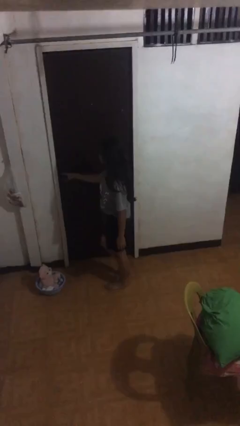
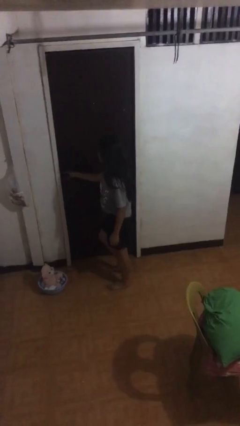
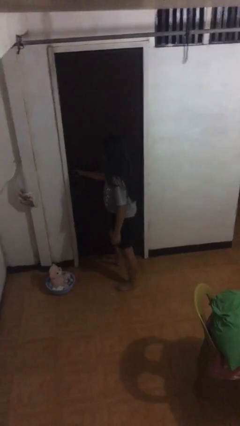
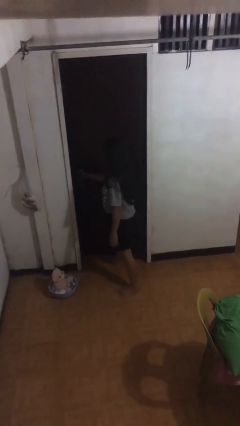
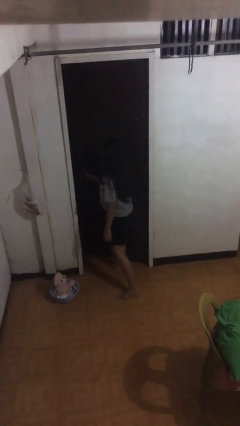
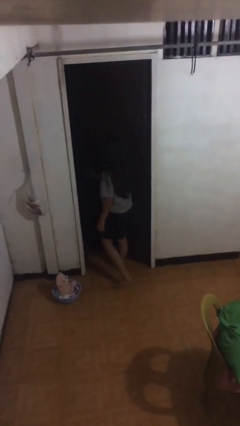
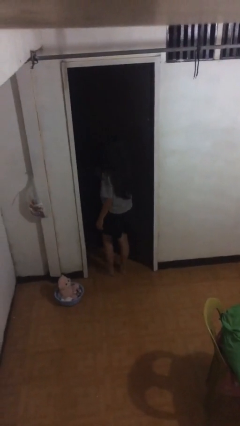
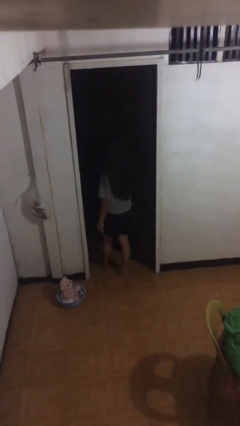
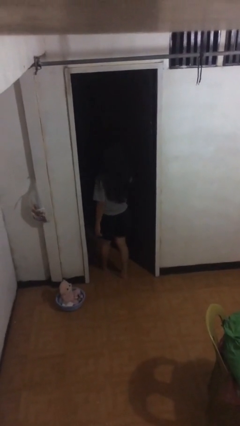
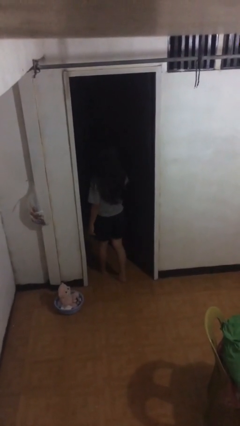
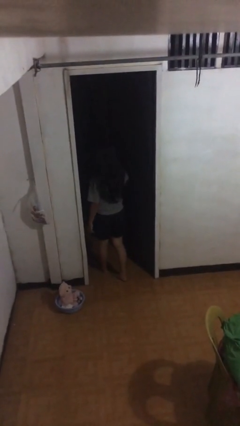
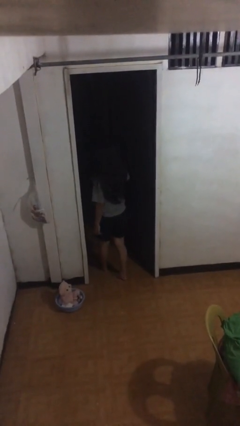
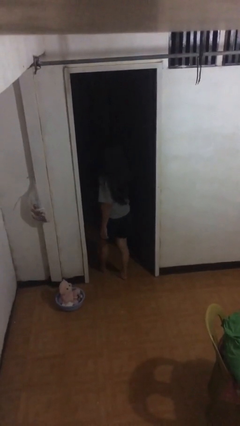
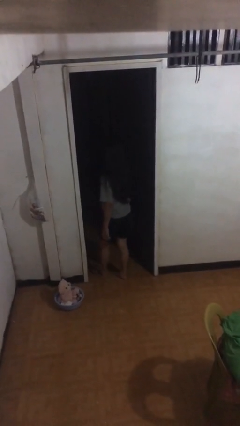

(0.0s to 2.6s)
person opens facility door

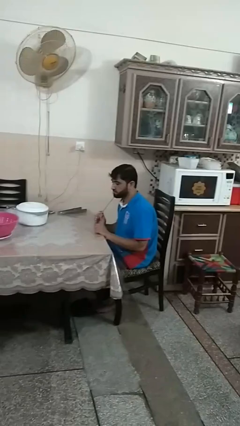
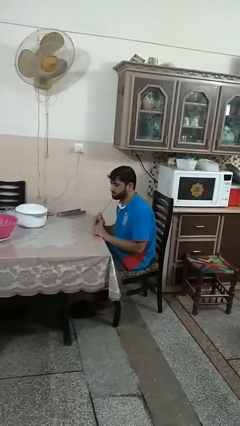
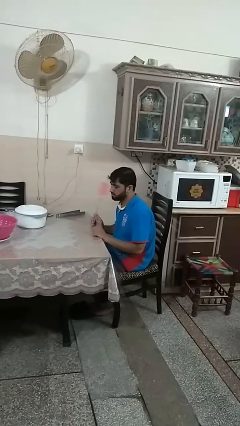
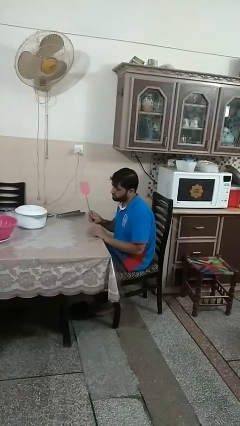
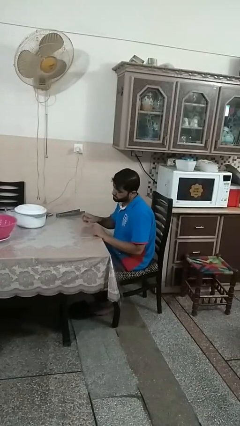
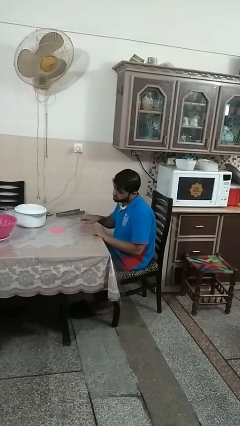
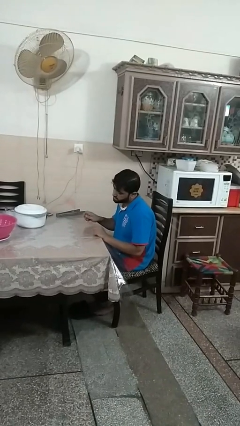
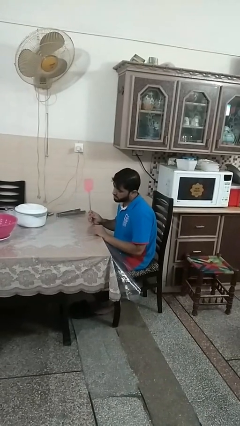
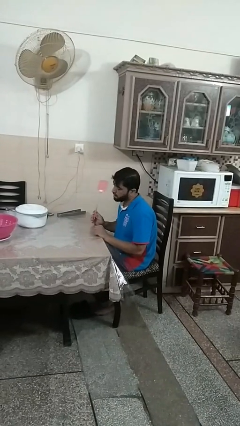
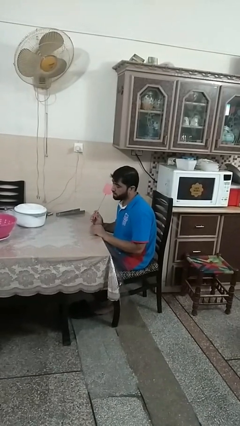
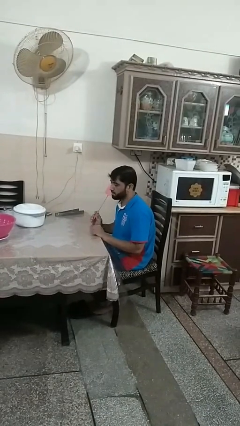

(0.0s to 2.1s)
person swats bug

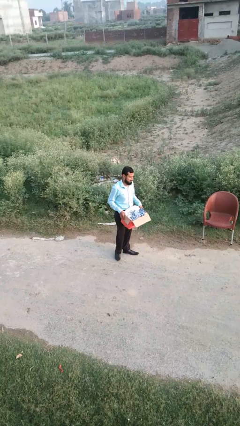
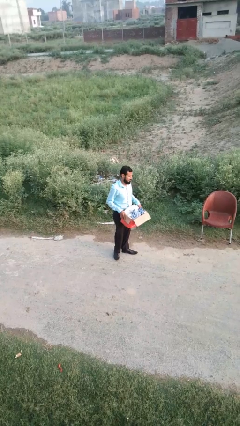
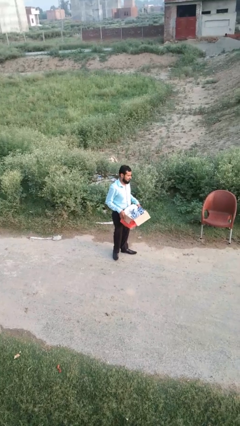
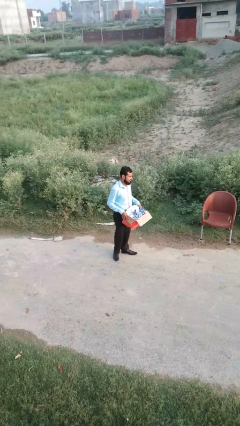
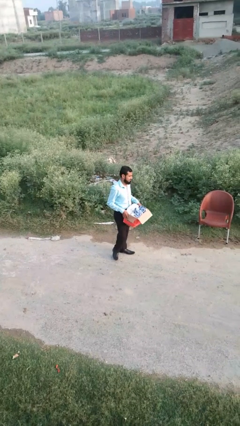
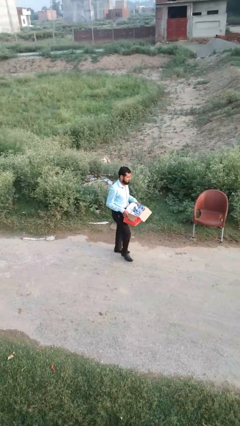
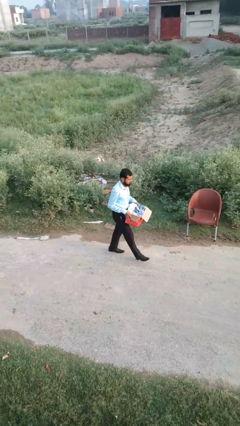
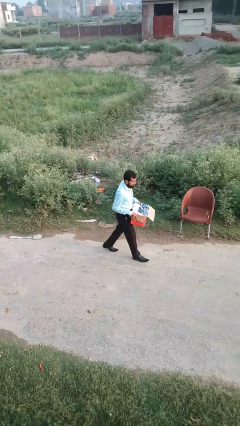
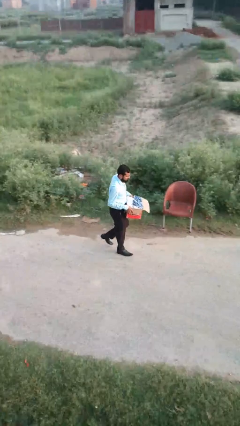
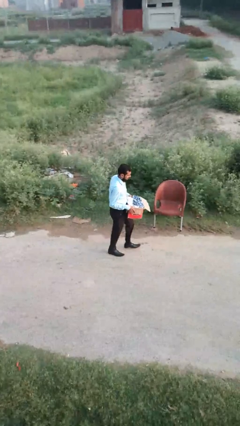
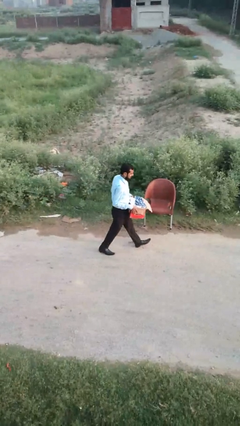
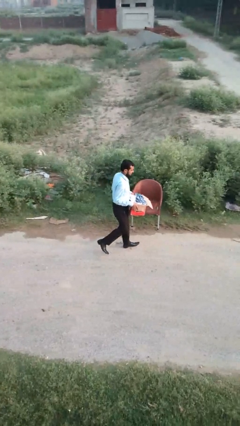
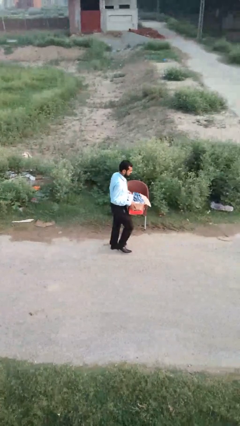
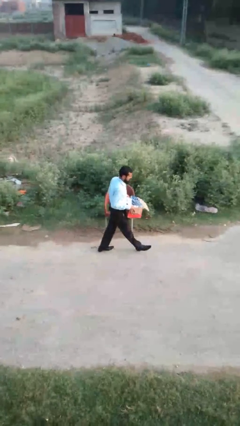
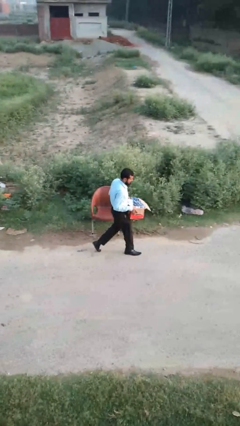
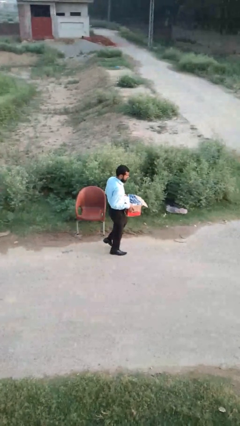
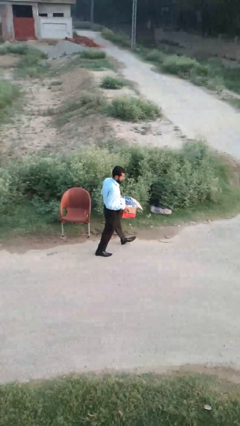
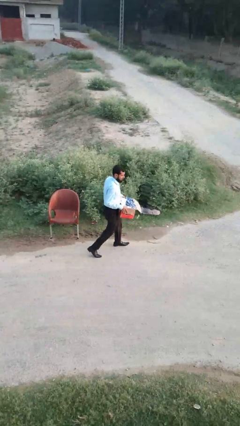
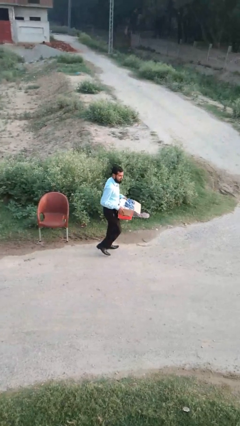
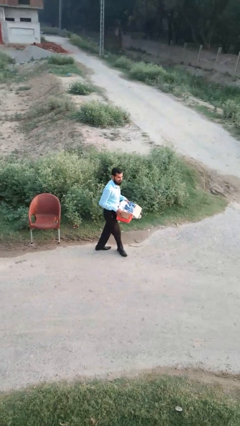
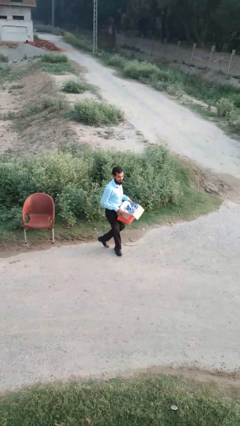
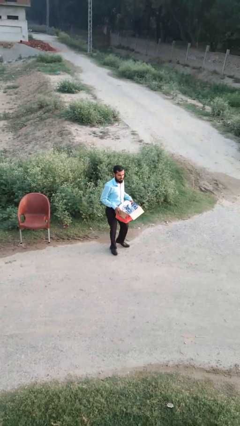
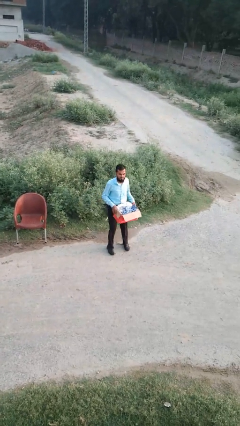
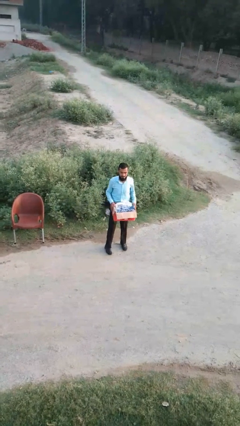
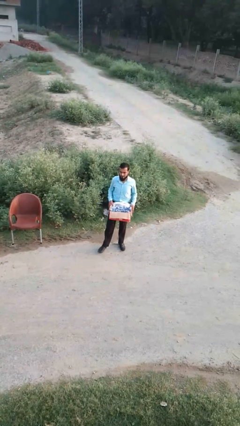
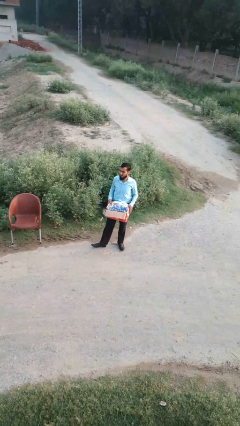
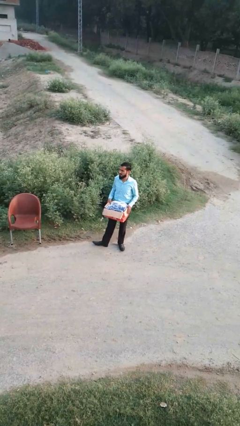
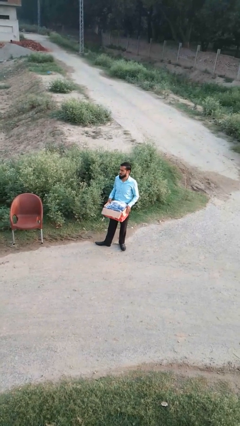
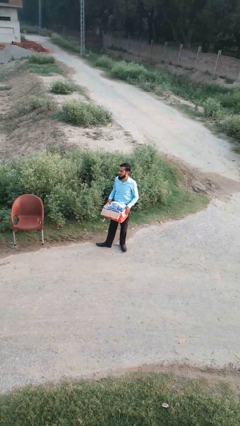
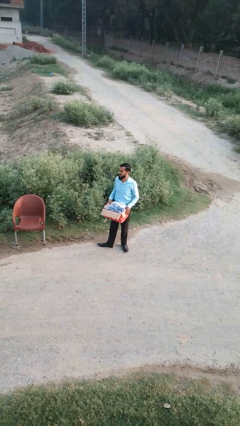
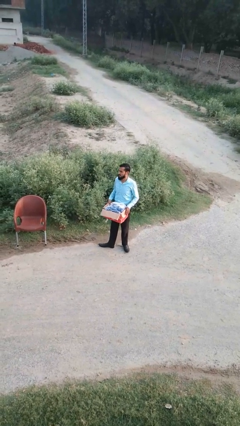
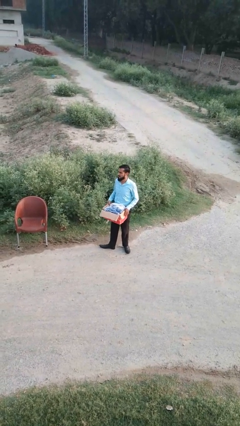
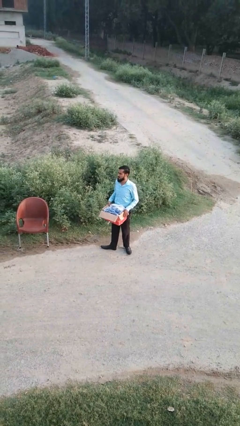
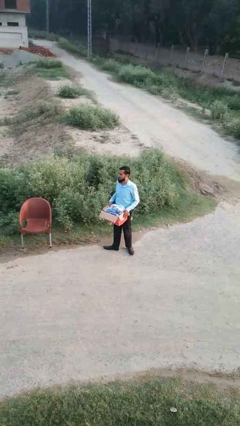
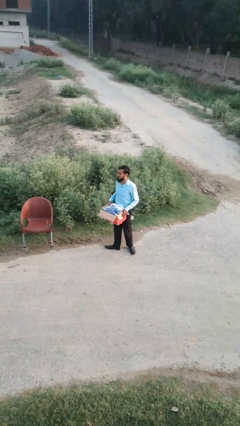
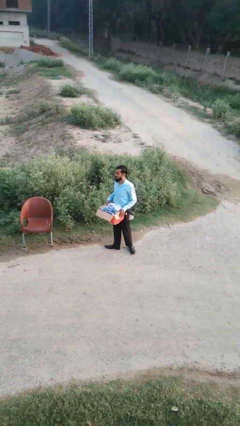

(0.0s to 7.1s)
person carries laundry basket

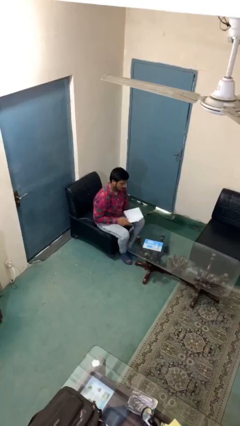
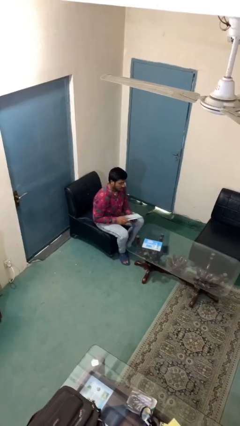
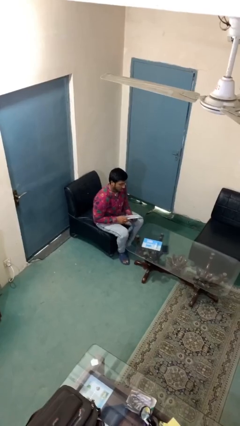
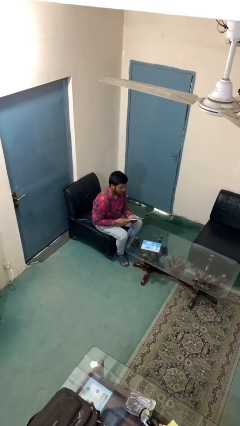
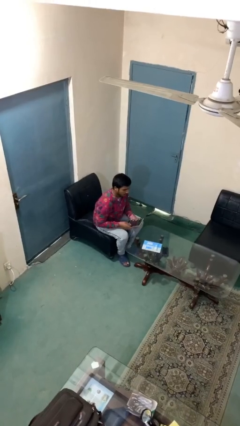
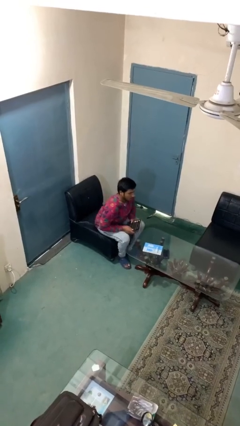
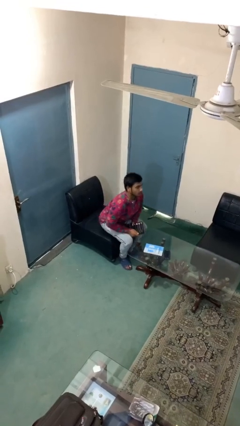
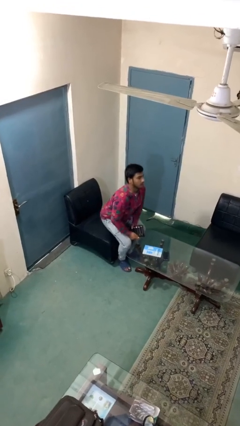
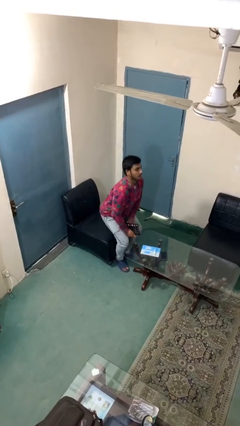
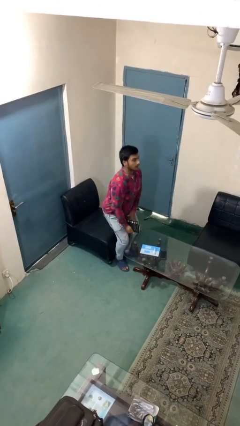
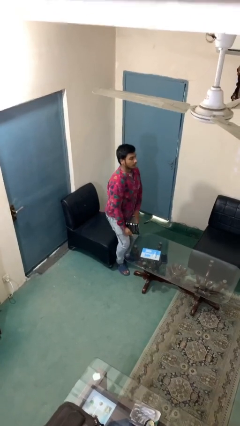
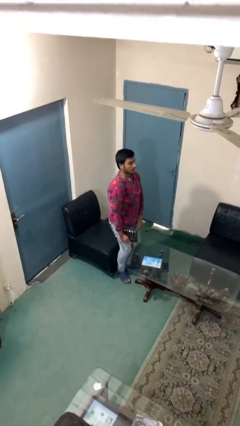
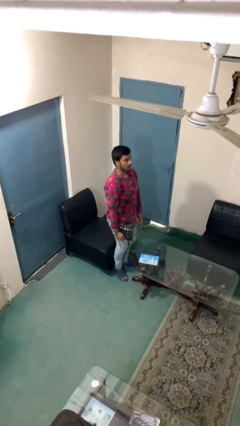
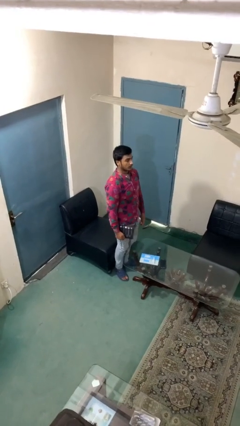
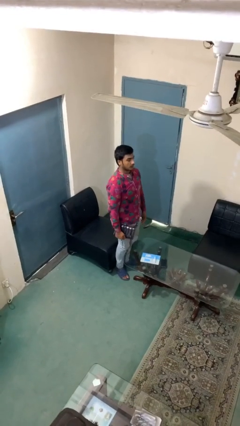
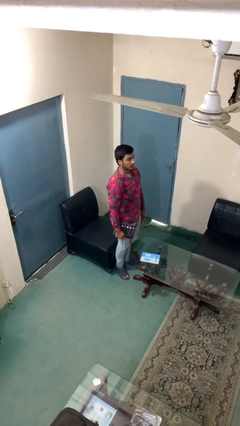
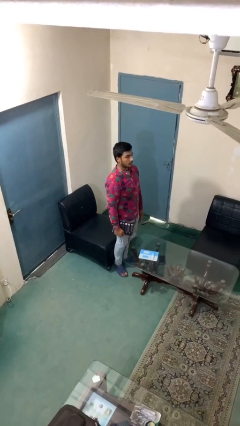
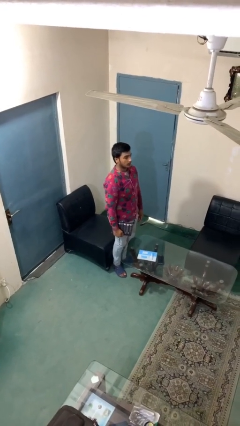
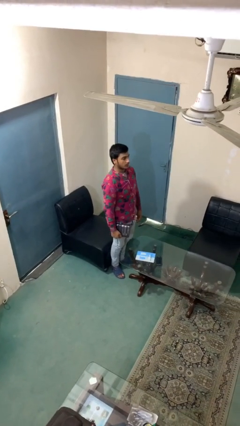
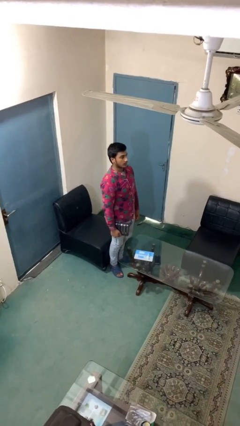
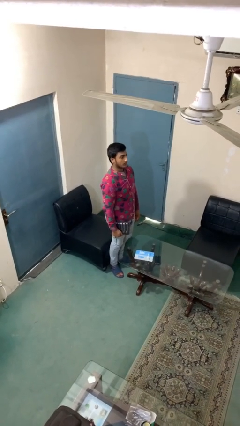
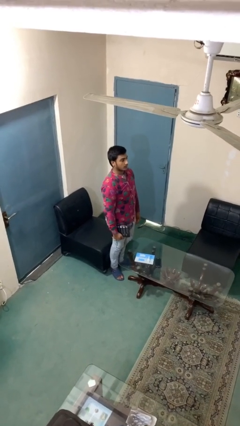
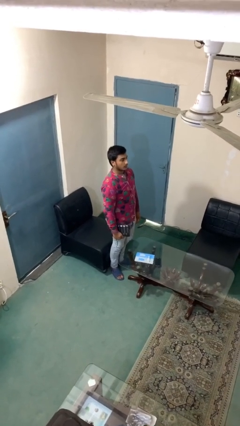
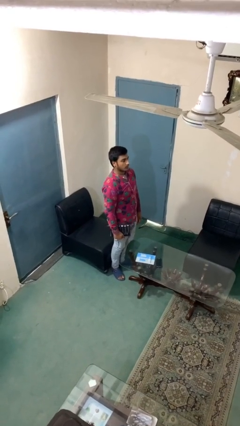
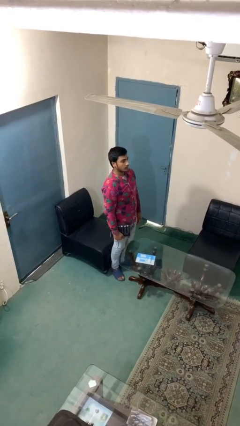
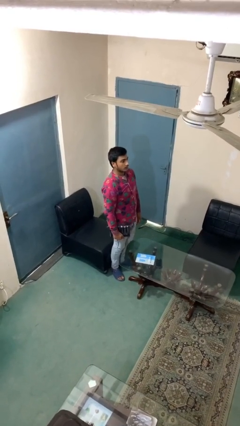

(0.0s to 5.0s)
person stands up

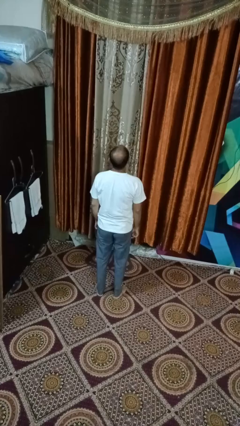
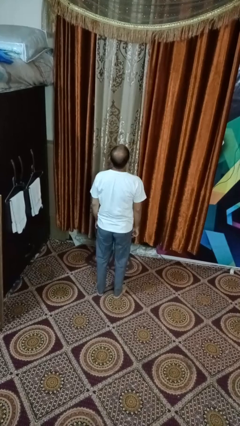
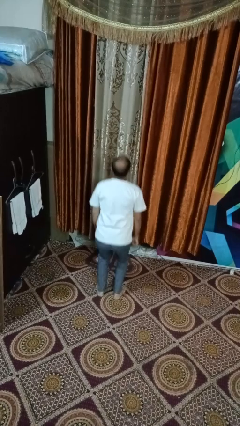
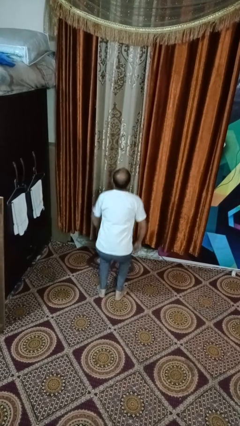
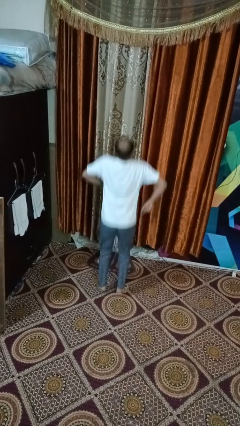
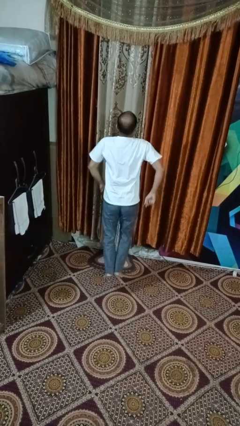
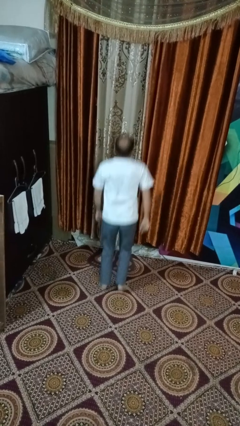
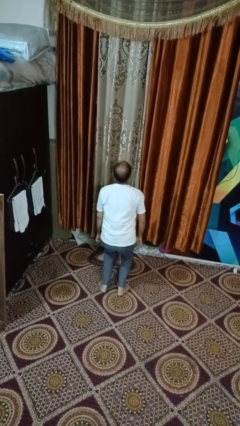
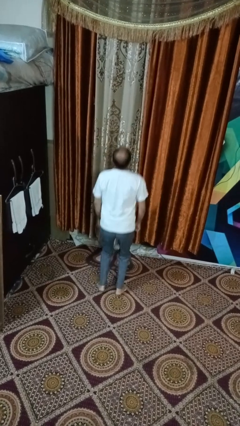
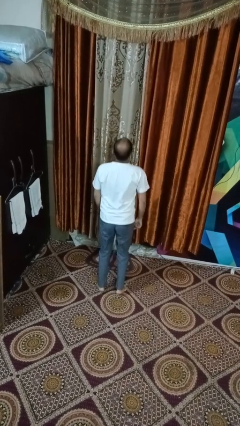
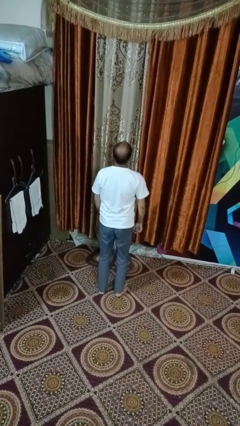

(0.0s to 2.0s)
person jumps
